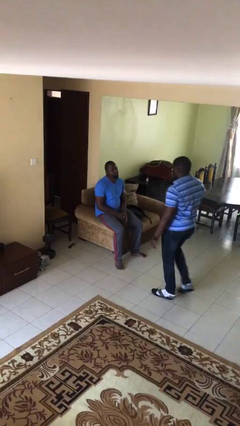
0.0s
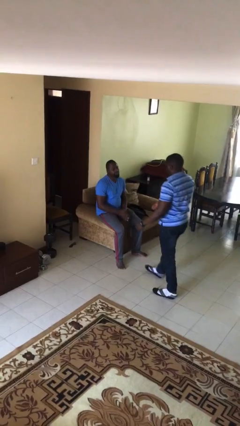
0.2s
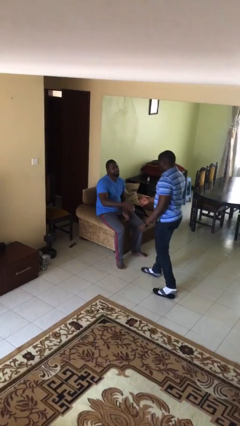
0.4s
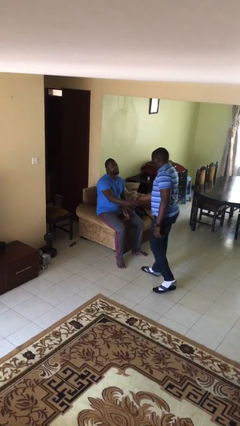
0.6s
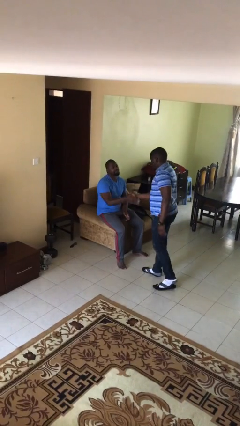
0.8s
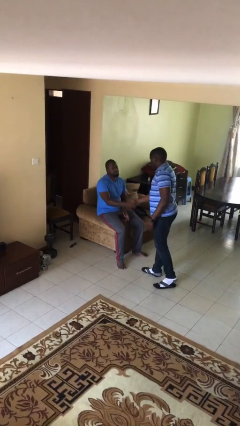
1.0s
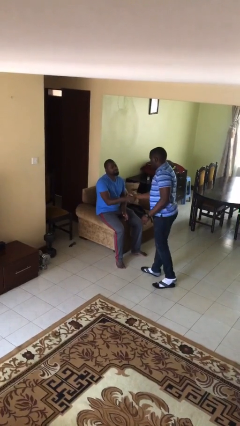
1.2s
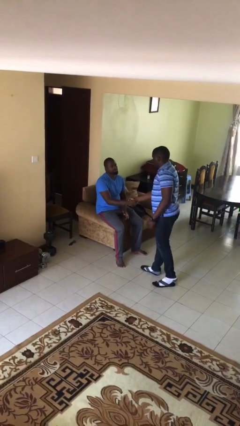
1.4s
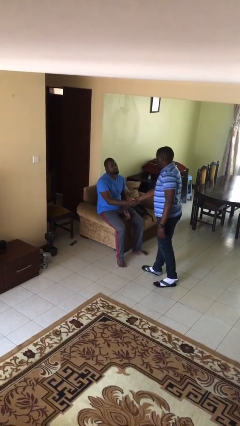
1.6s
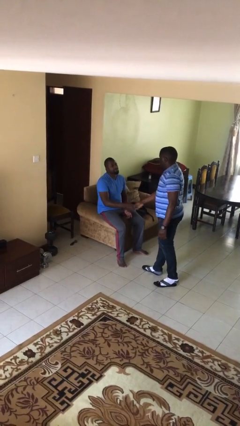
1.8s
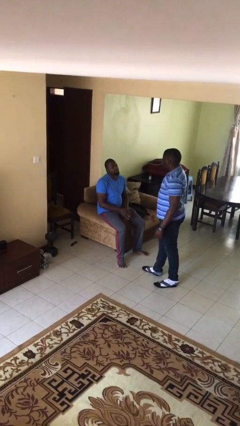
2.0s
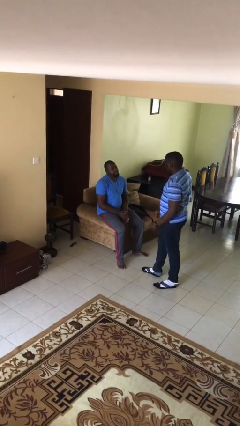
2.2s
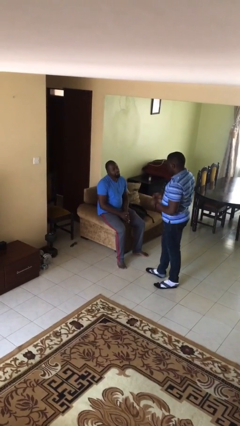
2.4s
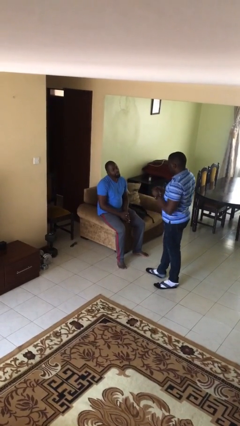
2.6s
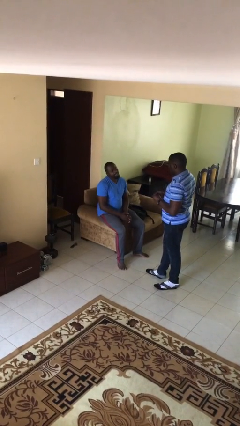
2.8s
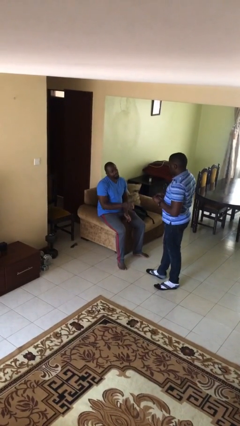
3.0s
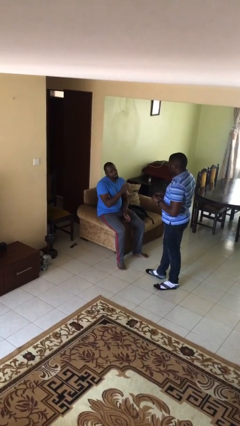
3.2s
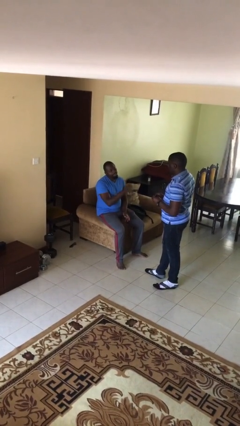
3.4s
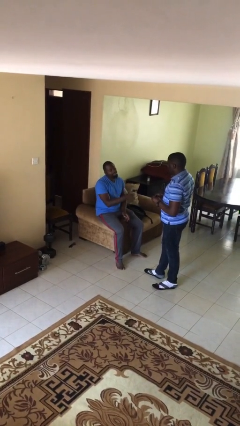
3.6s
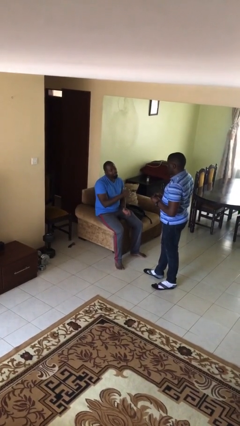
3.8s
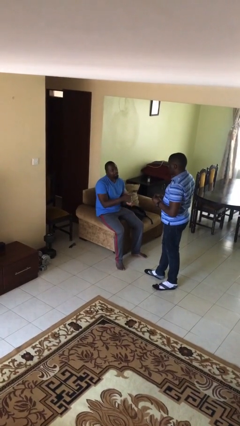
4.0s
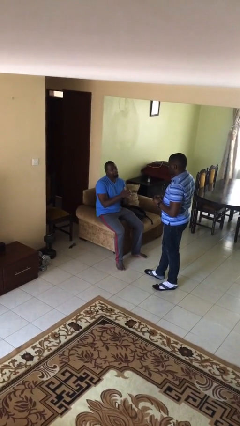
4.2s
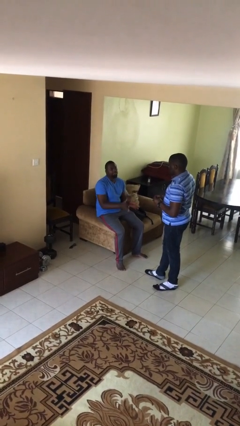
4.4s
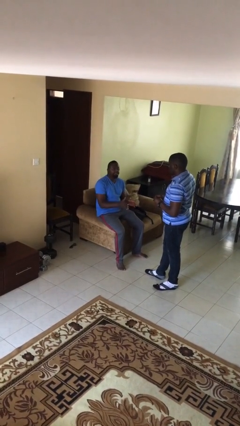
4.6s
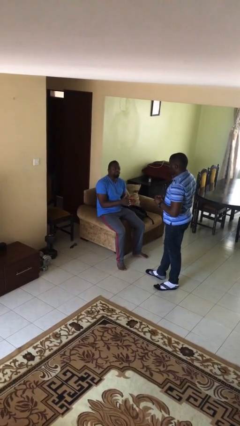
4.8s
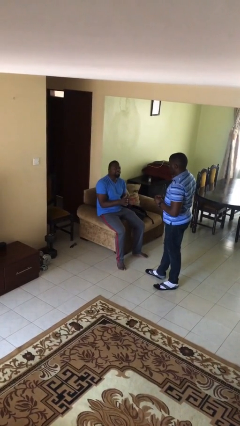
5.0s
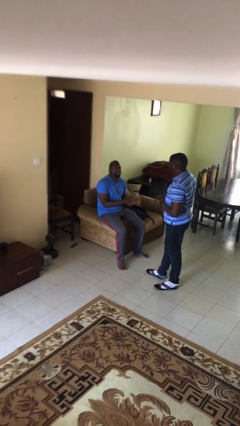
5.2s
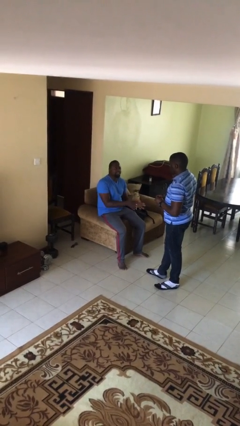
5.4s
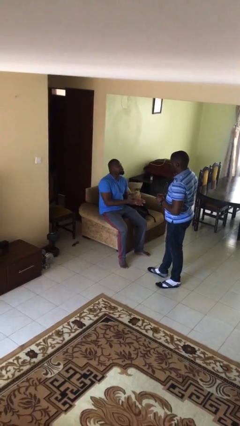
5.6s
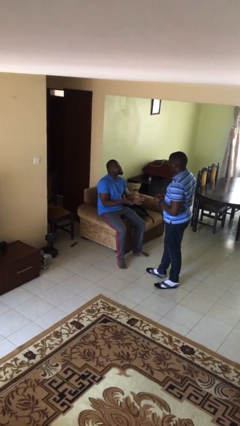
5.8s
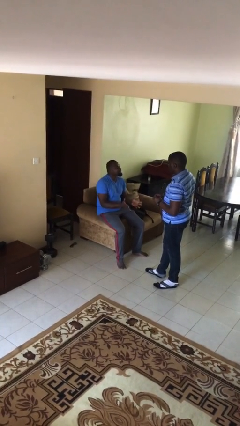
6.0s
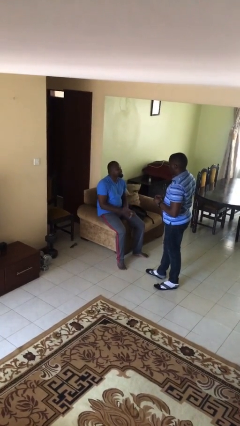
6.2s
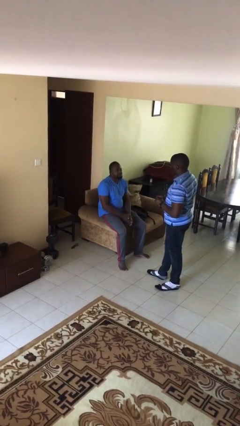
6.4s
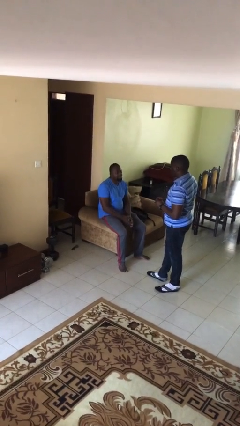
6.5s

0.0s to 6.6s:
person shakes hand

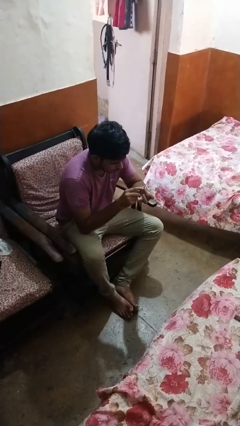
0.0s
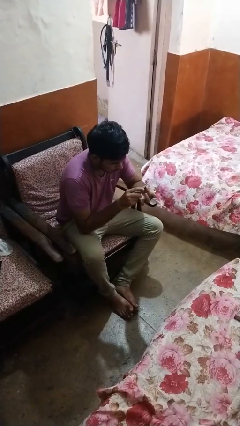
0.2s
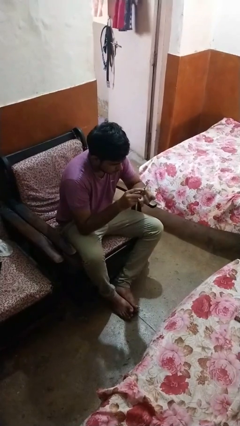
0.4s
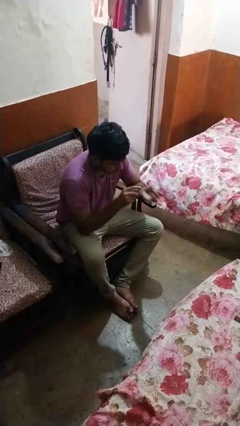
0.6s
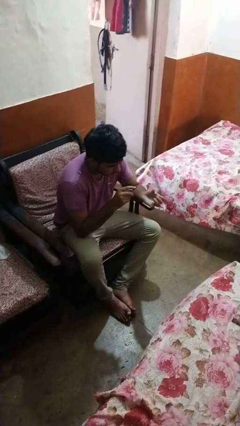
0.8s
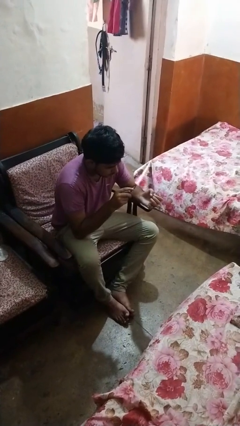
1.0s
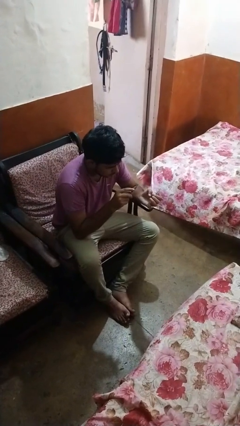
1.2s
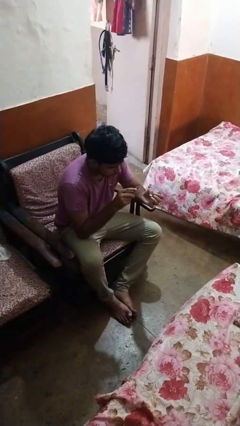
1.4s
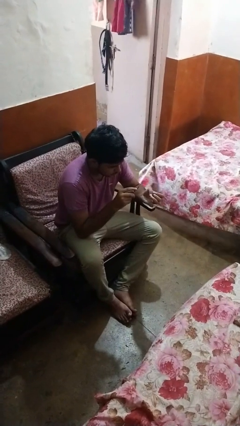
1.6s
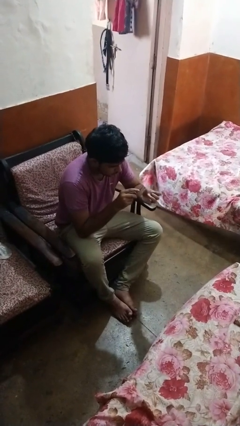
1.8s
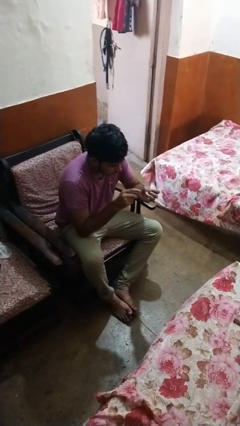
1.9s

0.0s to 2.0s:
person files fingernails

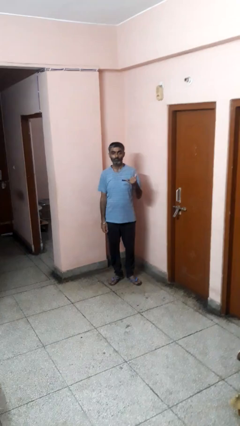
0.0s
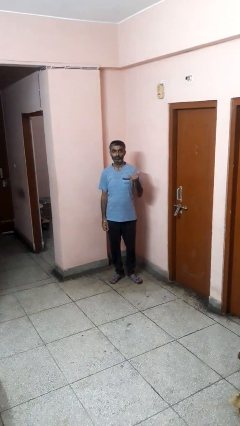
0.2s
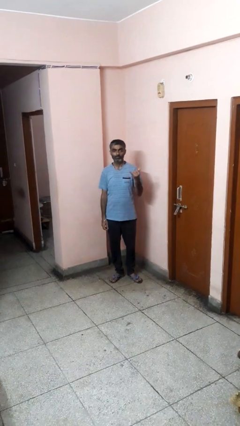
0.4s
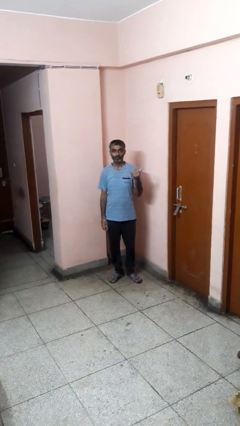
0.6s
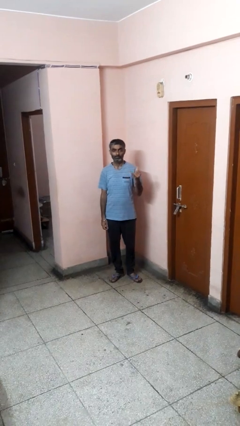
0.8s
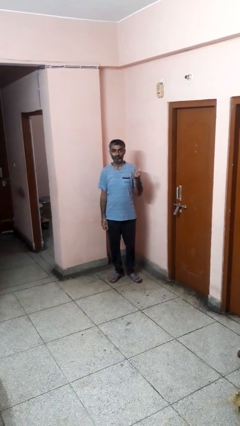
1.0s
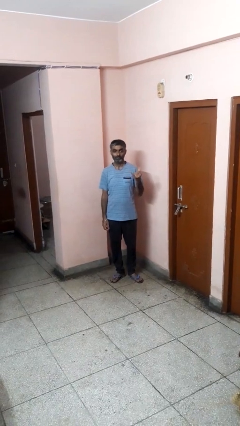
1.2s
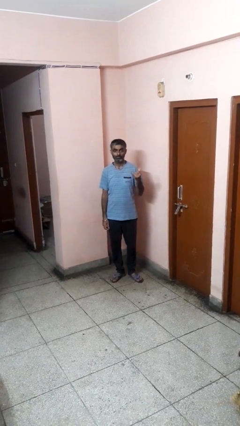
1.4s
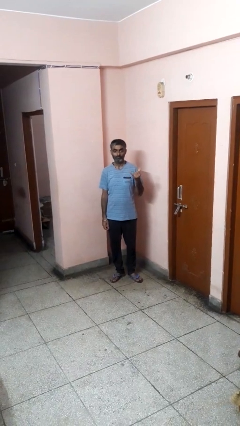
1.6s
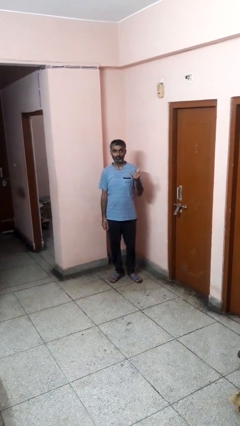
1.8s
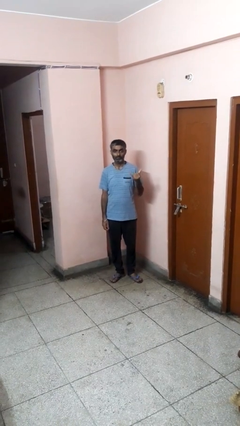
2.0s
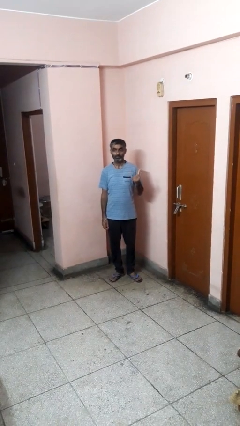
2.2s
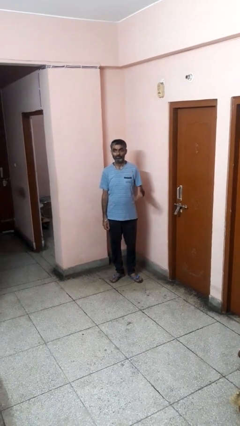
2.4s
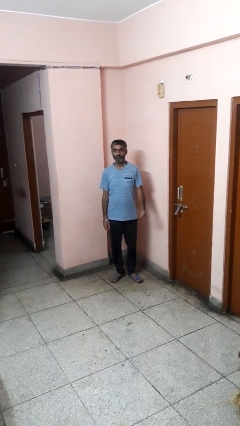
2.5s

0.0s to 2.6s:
person gestures hang loose

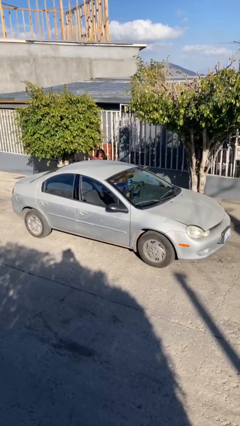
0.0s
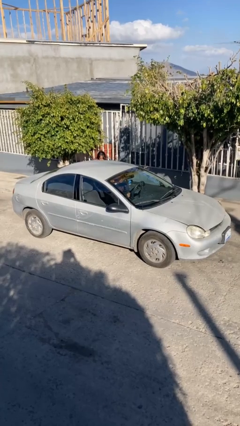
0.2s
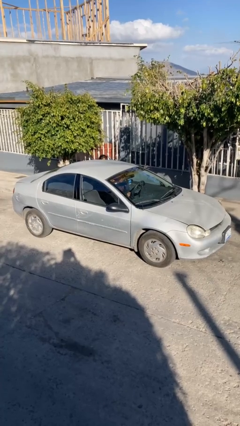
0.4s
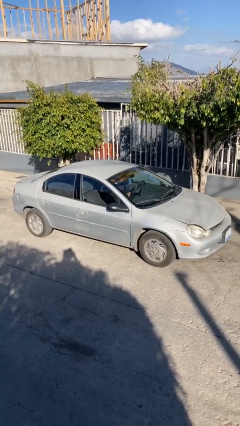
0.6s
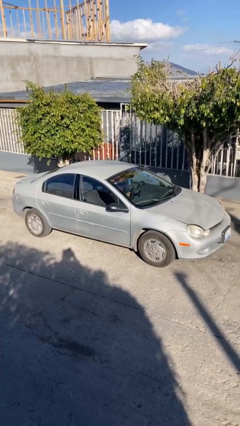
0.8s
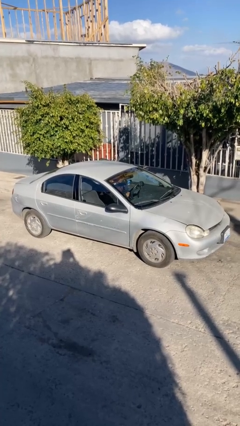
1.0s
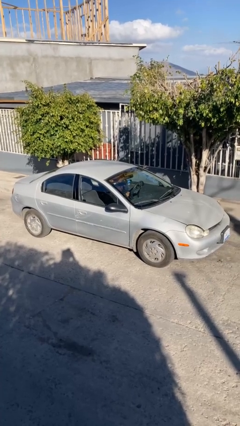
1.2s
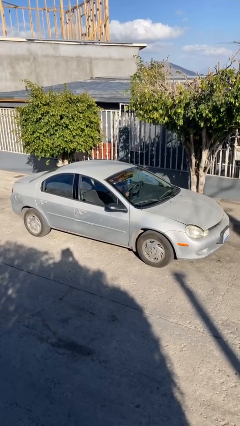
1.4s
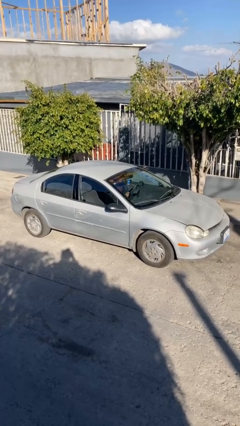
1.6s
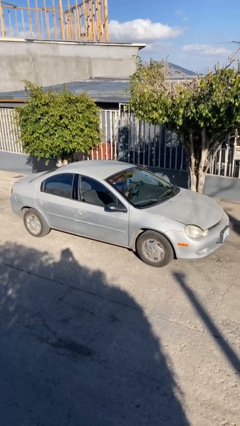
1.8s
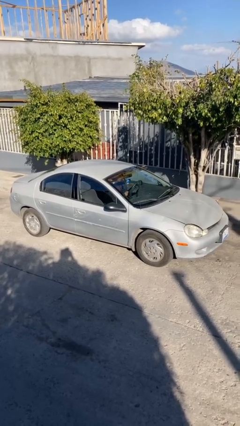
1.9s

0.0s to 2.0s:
car picks up person

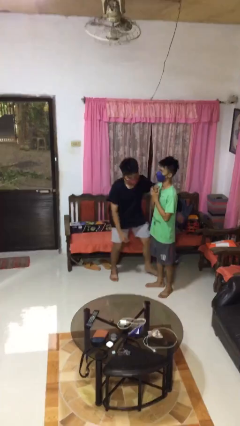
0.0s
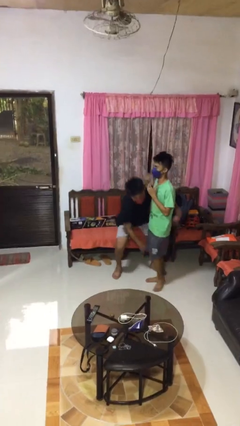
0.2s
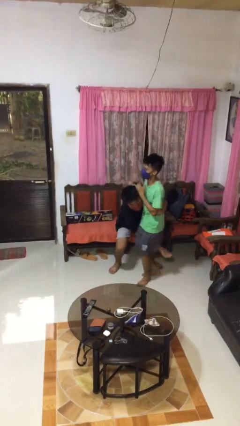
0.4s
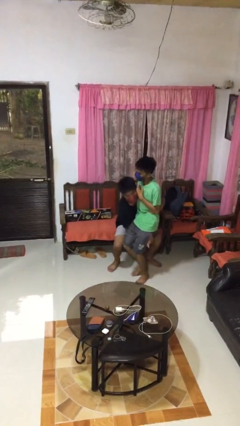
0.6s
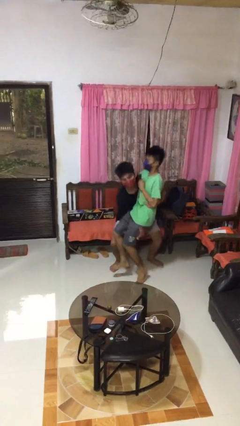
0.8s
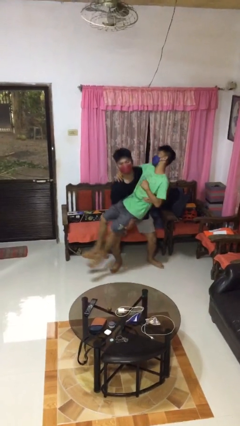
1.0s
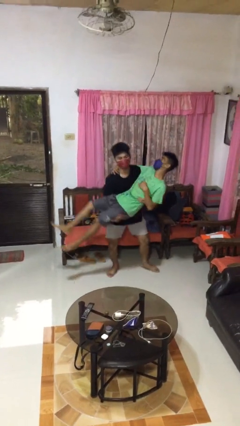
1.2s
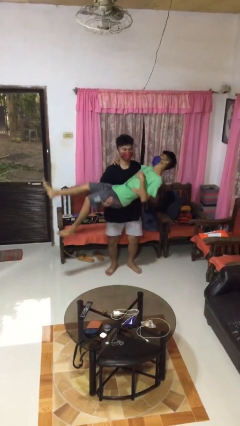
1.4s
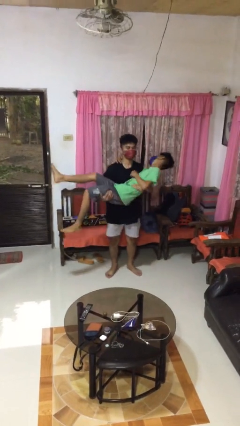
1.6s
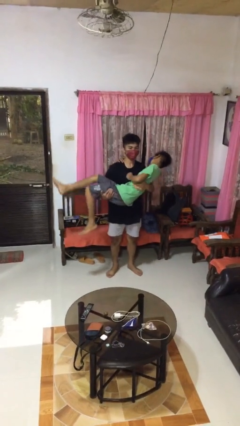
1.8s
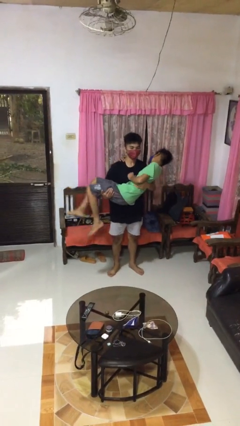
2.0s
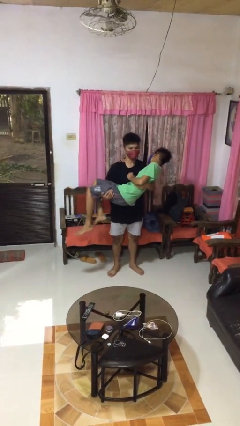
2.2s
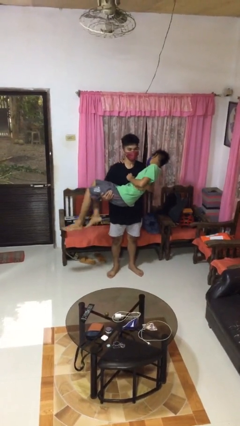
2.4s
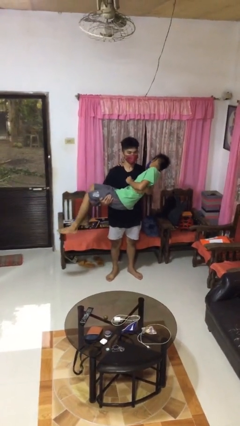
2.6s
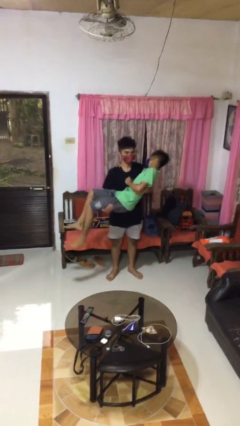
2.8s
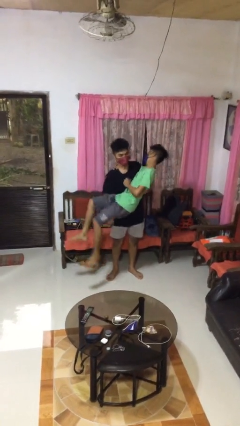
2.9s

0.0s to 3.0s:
person picks up person

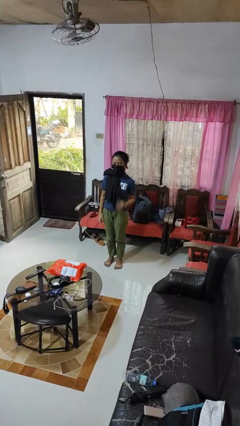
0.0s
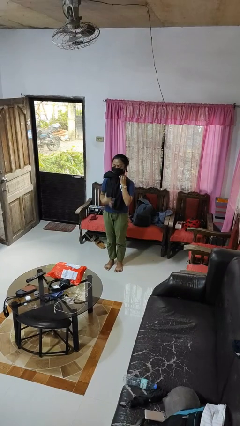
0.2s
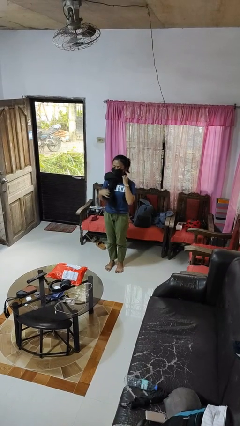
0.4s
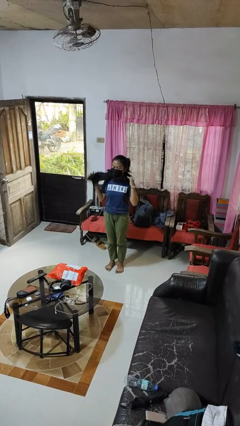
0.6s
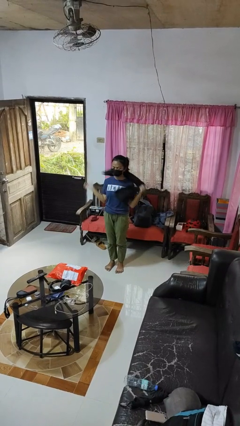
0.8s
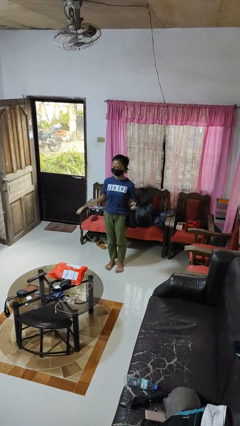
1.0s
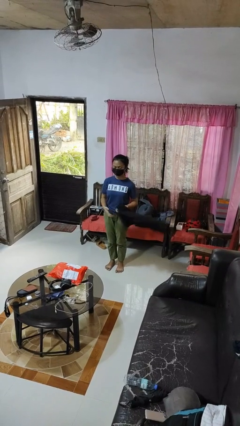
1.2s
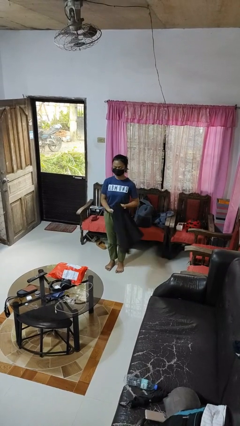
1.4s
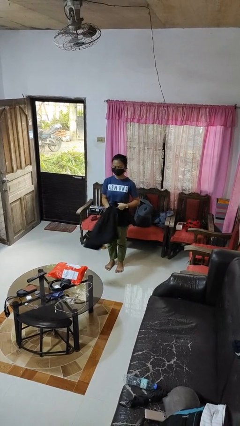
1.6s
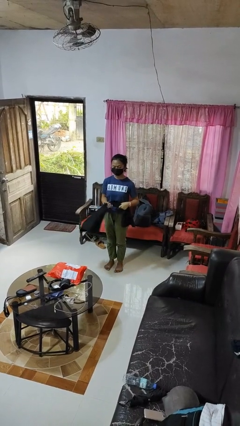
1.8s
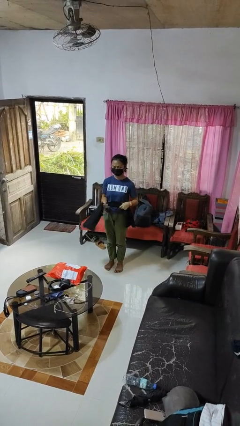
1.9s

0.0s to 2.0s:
person takes off scarf
